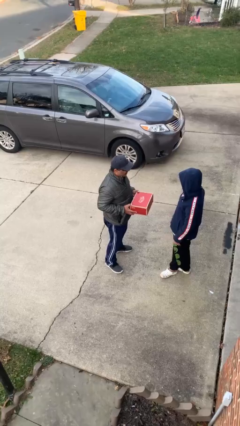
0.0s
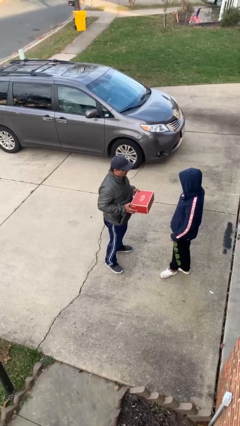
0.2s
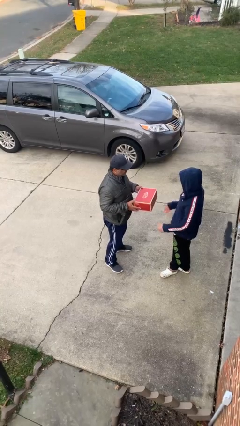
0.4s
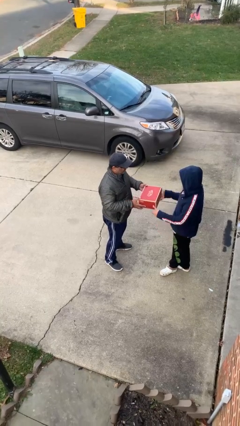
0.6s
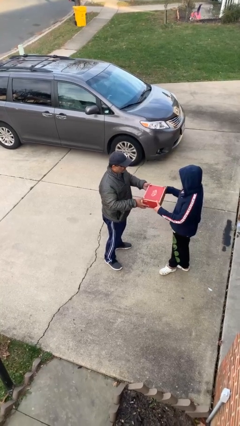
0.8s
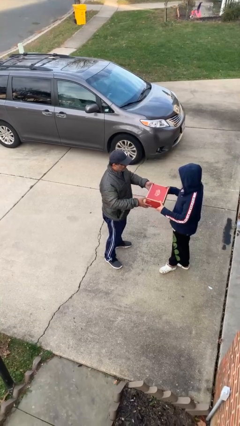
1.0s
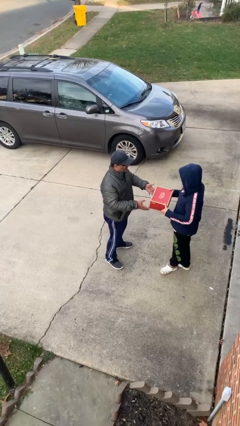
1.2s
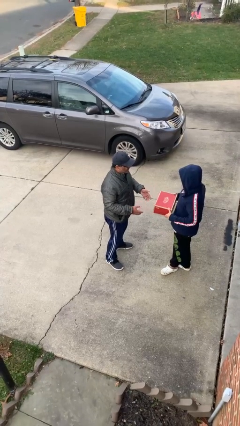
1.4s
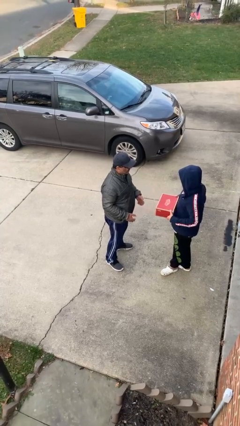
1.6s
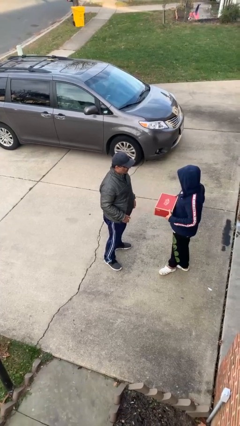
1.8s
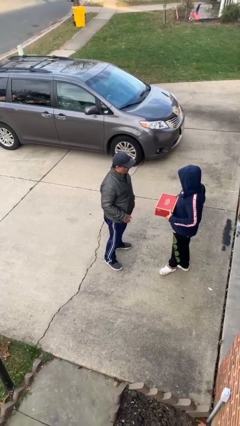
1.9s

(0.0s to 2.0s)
person transfers object to person

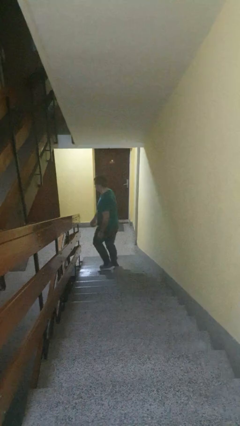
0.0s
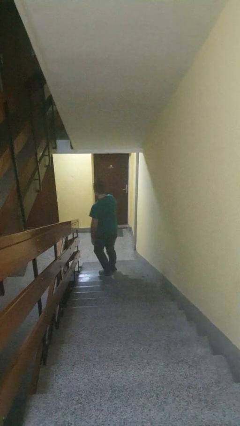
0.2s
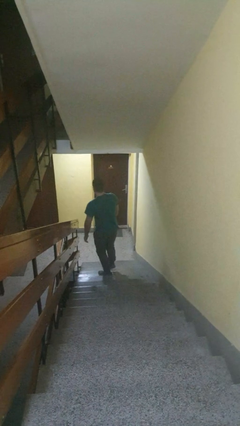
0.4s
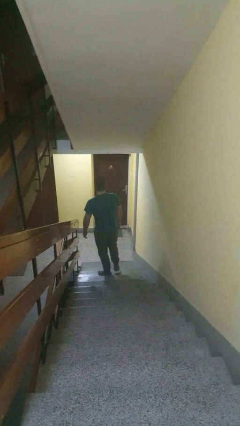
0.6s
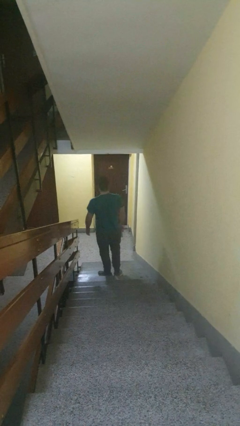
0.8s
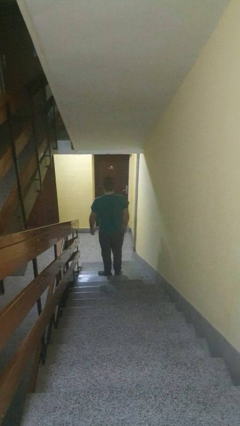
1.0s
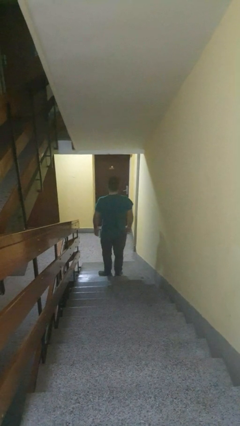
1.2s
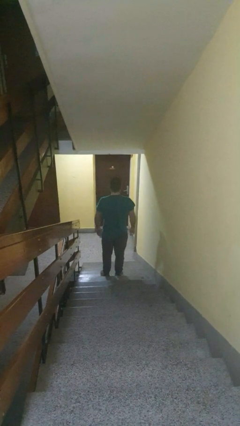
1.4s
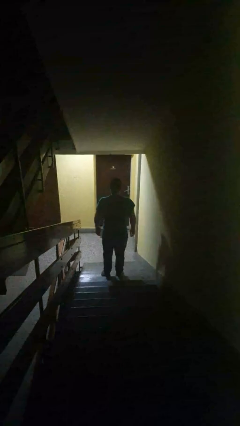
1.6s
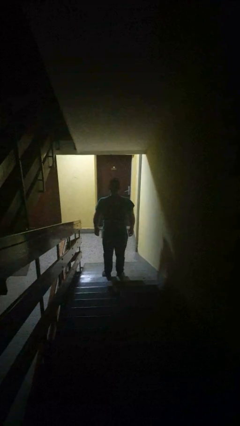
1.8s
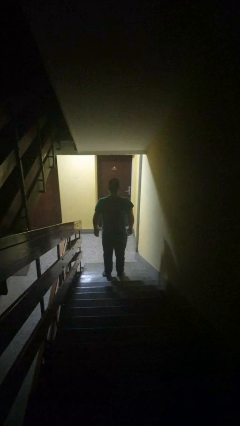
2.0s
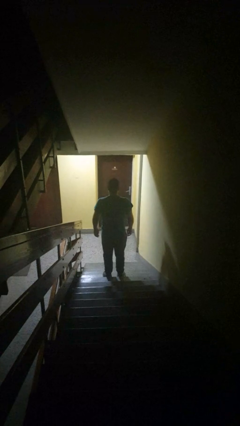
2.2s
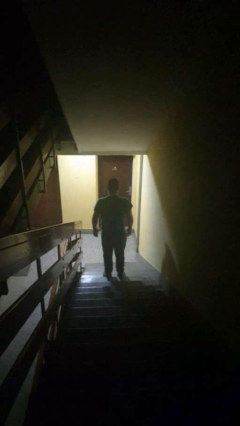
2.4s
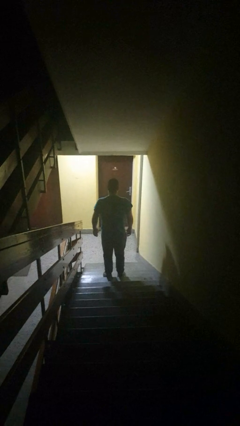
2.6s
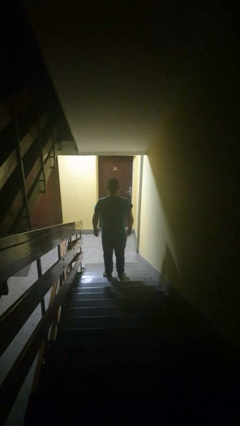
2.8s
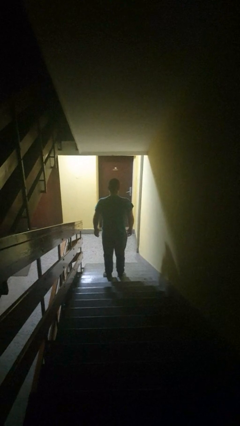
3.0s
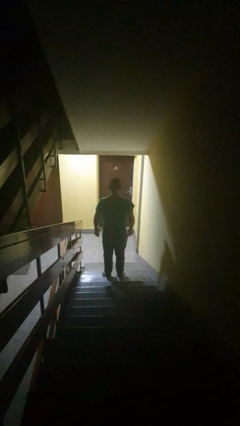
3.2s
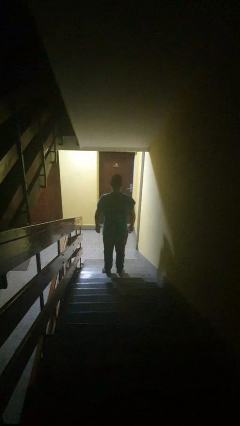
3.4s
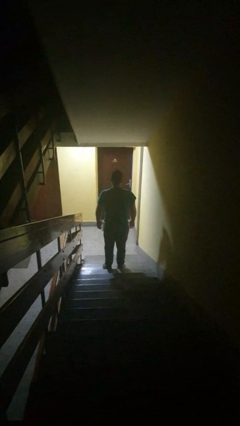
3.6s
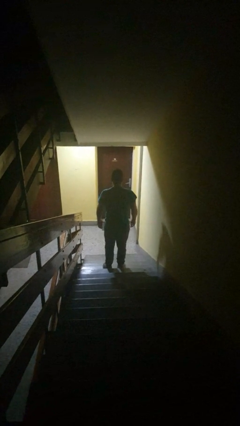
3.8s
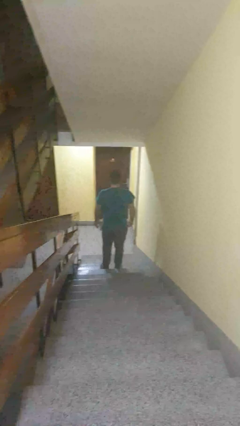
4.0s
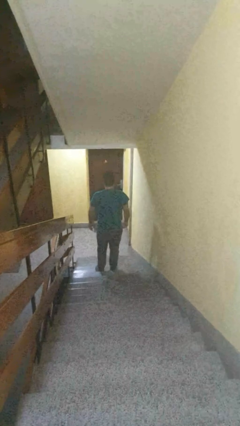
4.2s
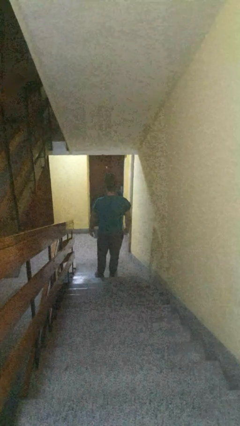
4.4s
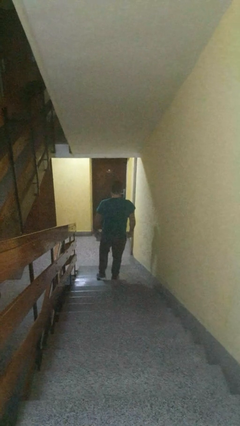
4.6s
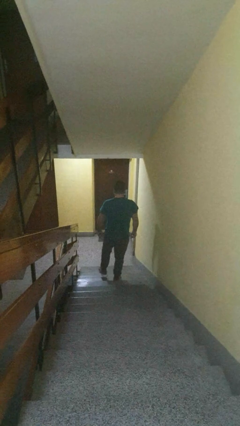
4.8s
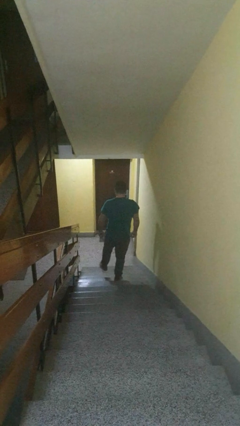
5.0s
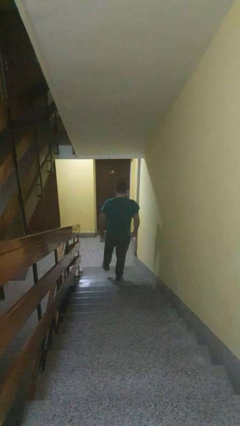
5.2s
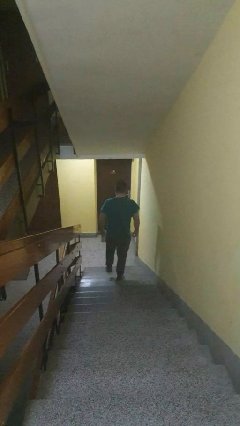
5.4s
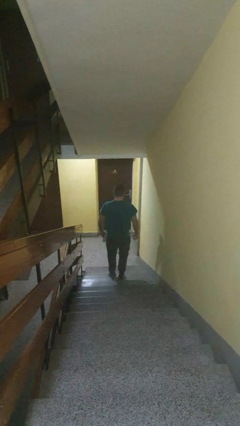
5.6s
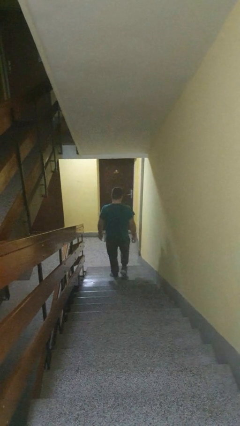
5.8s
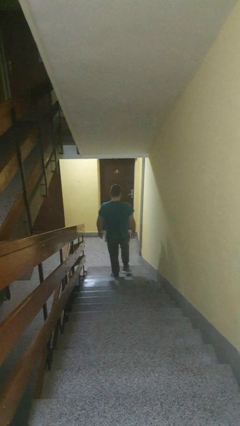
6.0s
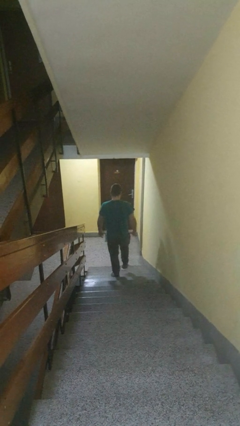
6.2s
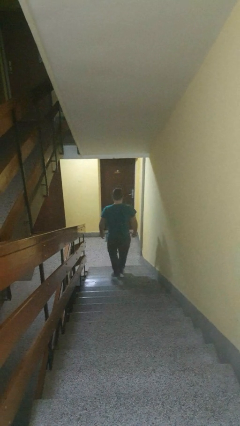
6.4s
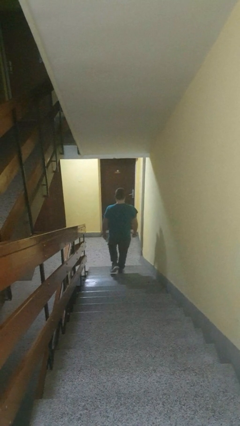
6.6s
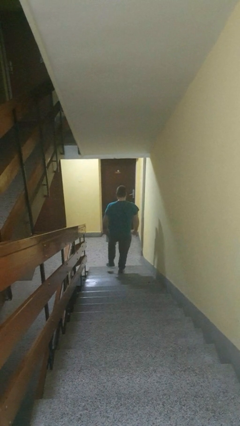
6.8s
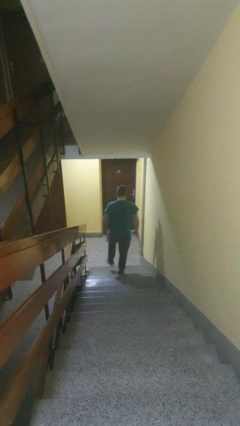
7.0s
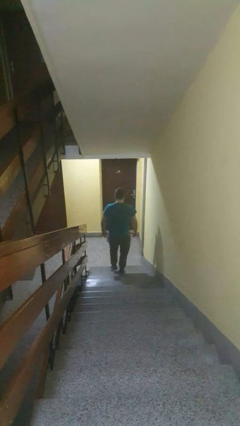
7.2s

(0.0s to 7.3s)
person climbs down stairs

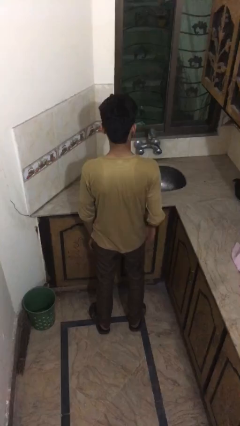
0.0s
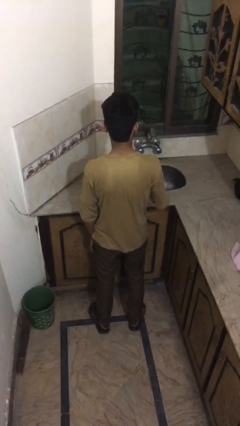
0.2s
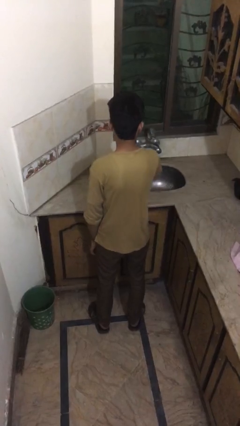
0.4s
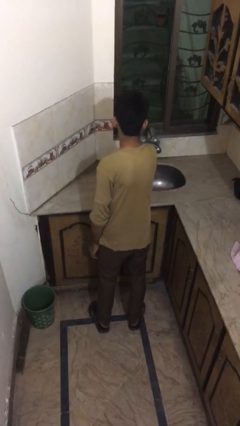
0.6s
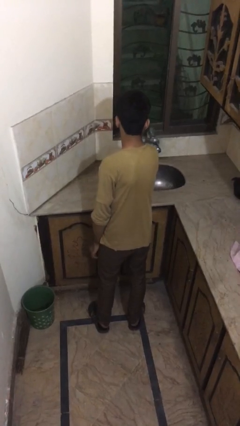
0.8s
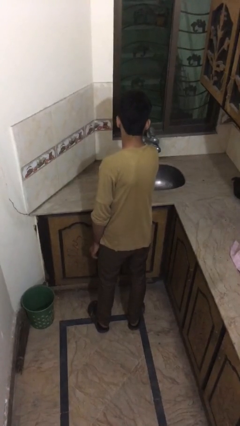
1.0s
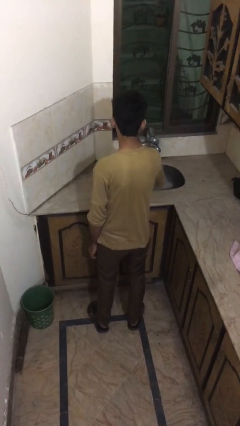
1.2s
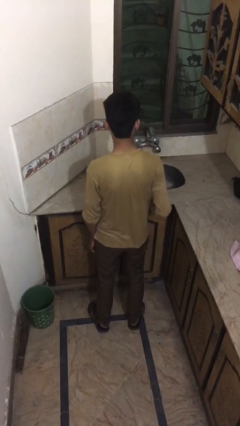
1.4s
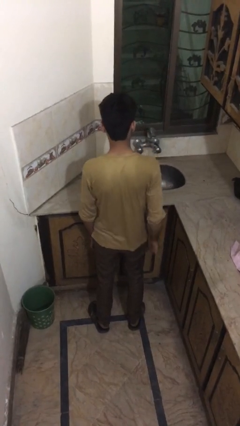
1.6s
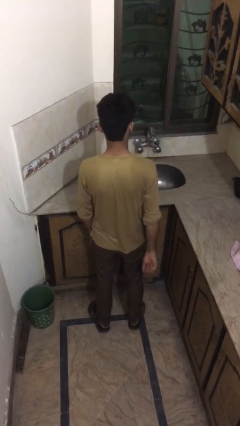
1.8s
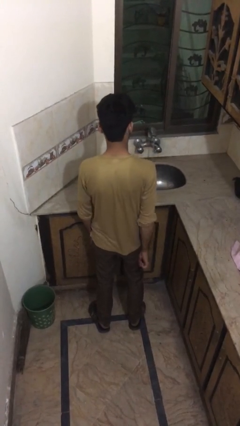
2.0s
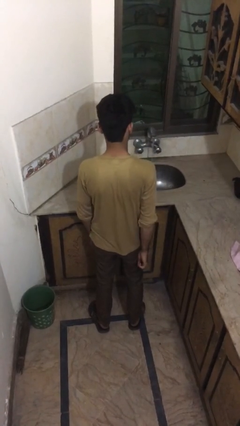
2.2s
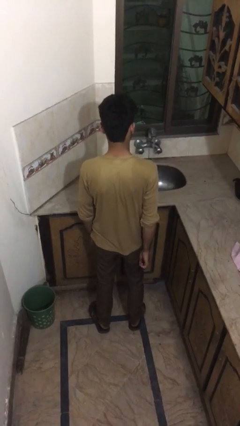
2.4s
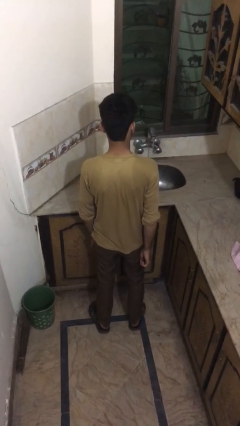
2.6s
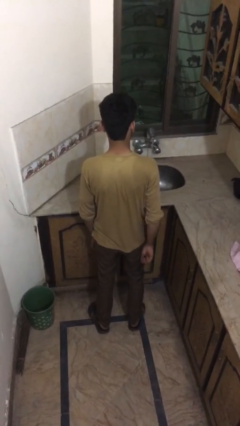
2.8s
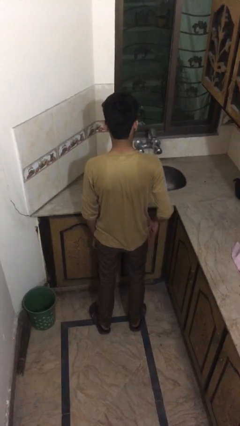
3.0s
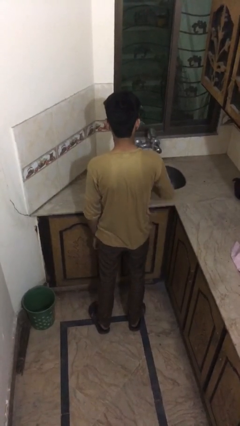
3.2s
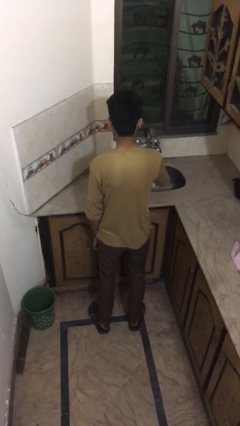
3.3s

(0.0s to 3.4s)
person turns on faucet

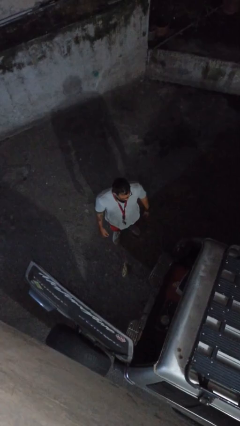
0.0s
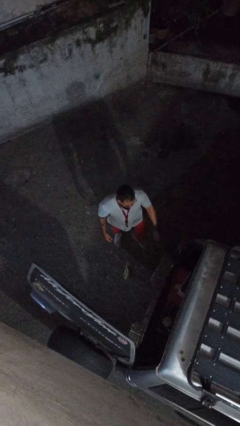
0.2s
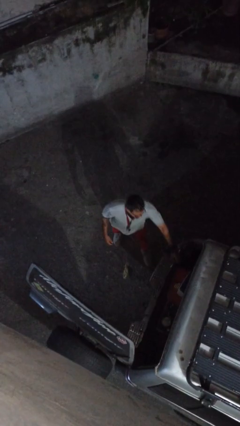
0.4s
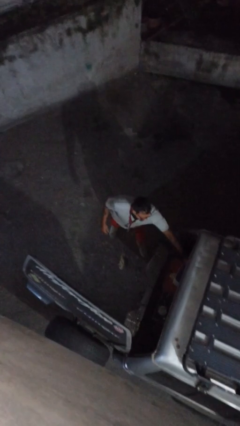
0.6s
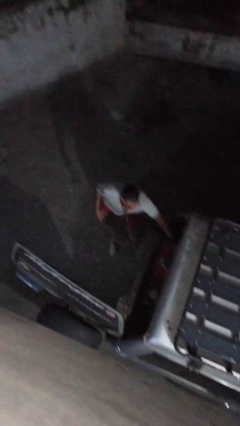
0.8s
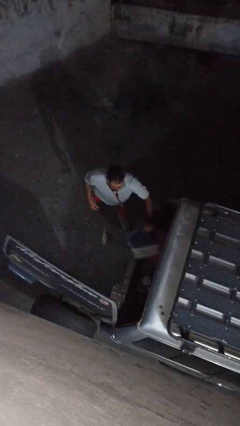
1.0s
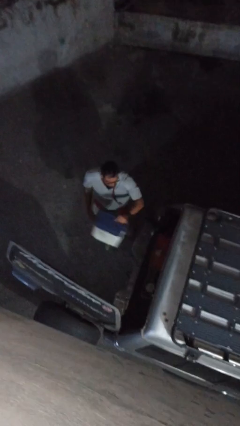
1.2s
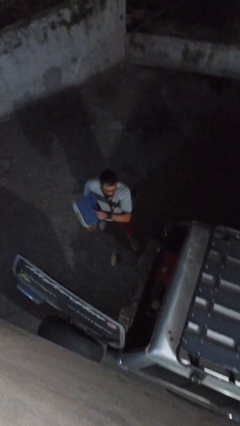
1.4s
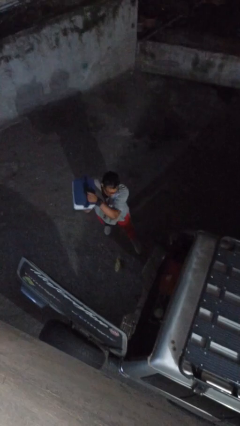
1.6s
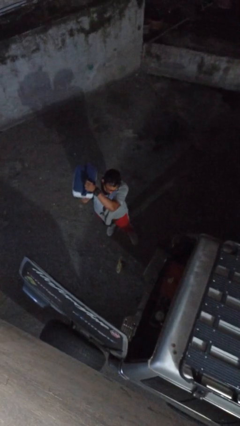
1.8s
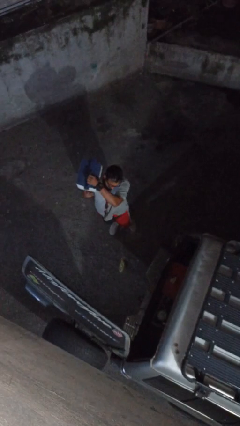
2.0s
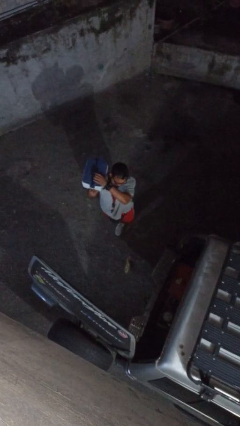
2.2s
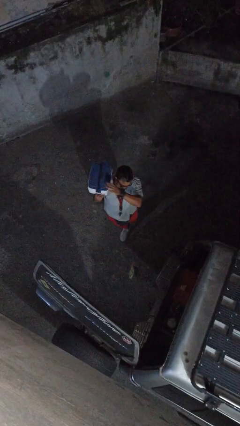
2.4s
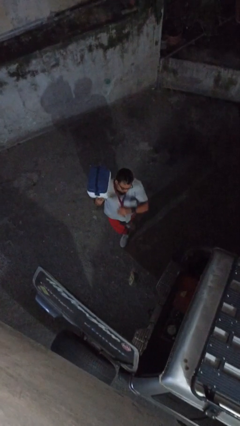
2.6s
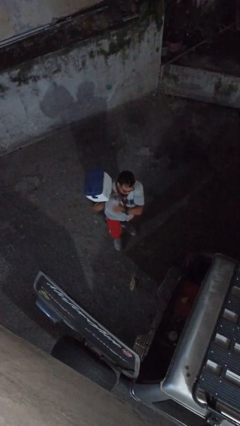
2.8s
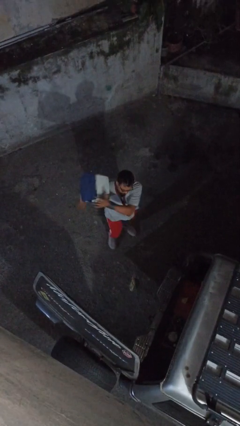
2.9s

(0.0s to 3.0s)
person unloads car

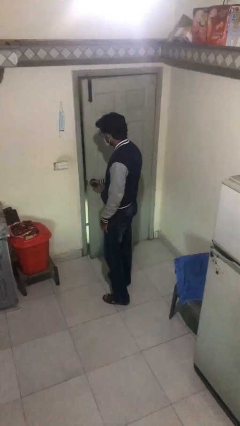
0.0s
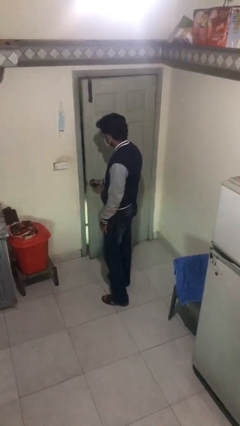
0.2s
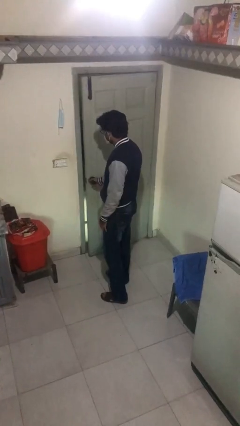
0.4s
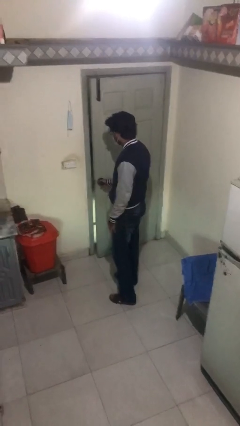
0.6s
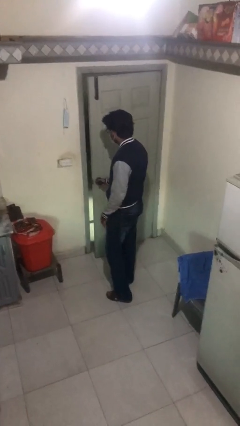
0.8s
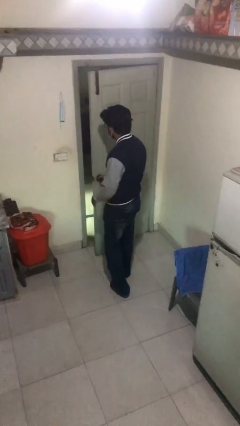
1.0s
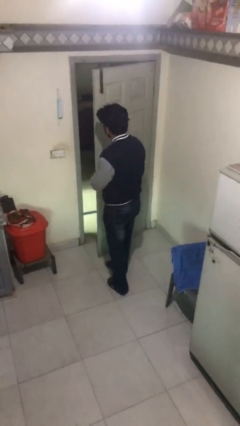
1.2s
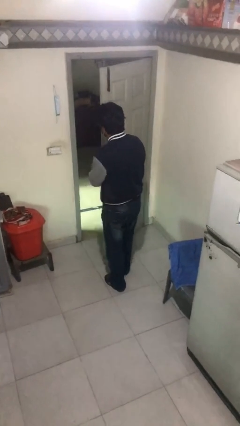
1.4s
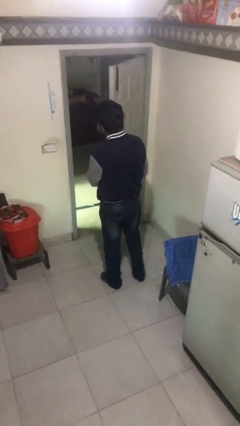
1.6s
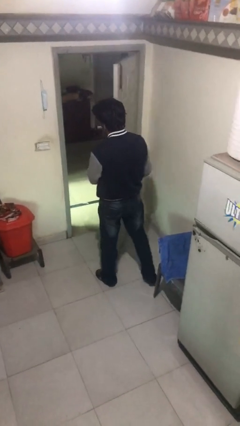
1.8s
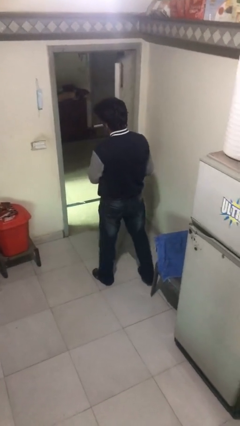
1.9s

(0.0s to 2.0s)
person opens facility door
